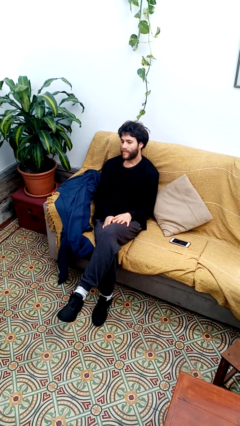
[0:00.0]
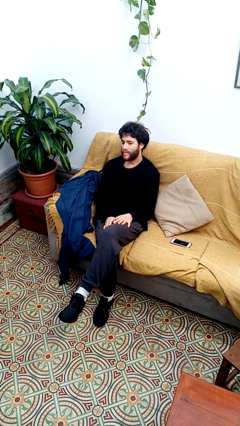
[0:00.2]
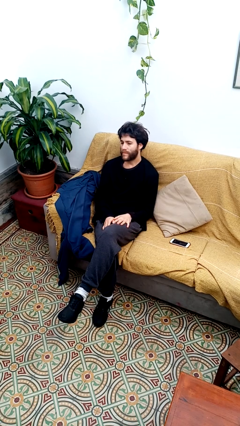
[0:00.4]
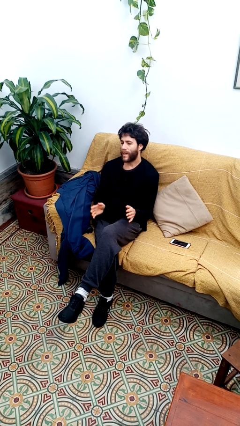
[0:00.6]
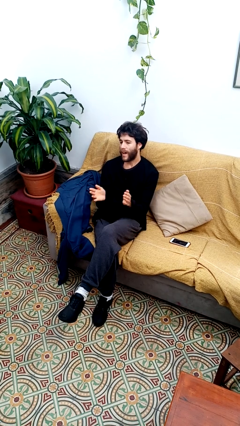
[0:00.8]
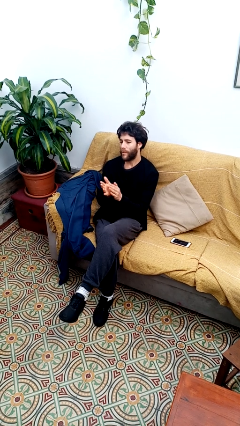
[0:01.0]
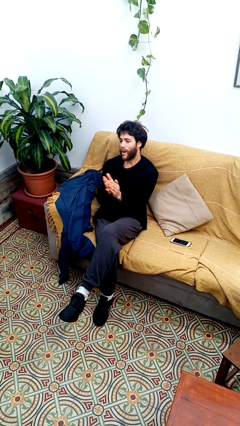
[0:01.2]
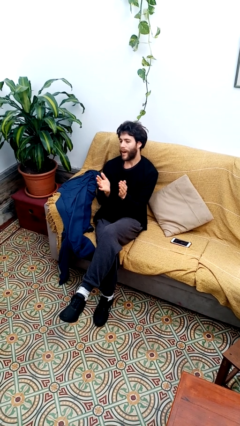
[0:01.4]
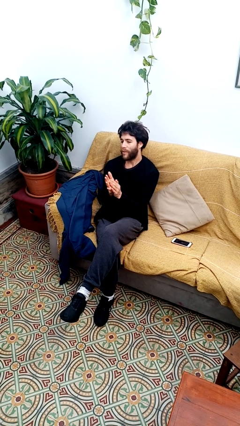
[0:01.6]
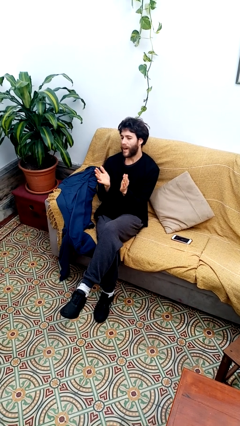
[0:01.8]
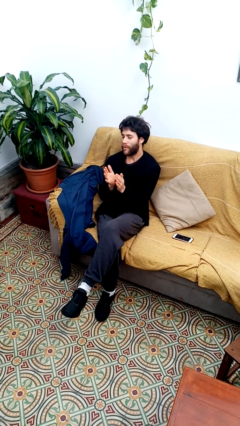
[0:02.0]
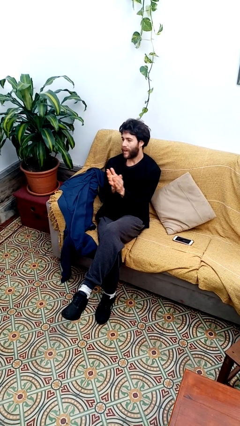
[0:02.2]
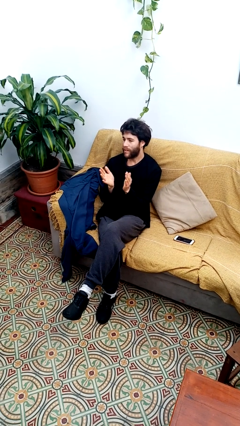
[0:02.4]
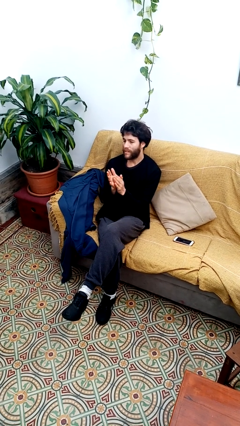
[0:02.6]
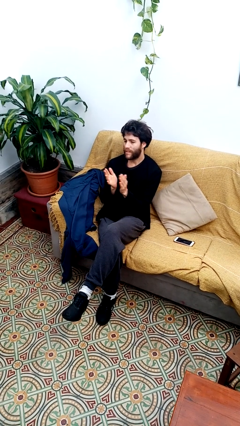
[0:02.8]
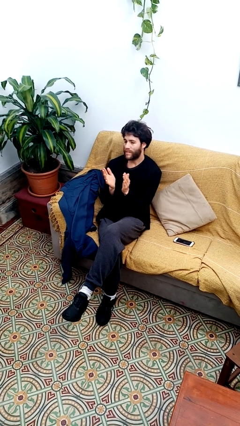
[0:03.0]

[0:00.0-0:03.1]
person claps hands

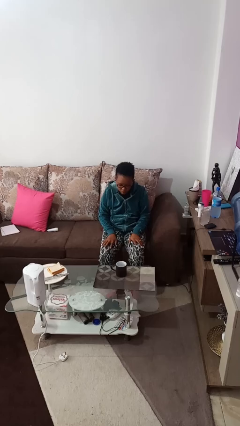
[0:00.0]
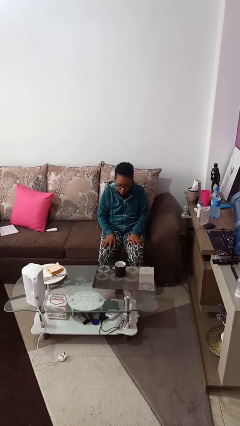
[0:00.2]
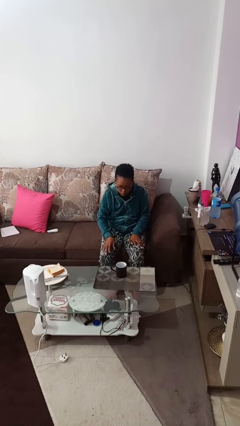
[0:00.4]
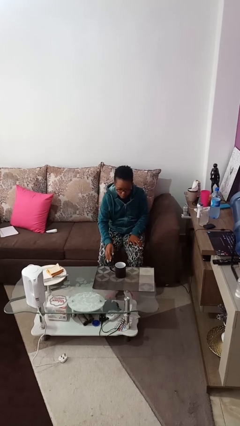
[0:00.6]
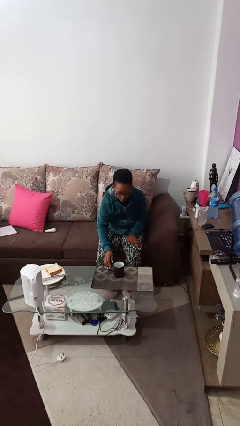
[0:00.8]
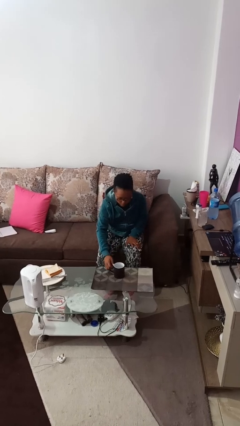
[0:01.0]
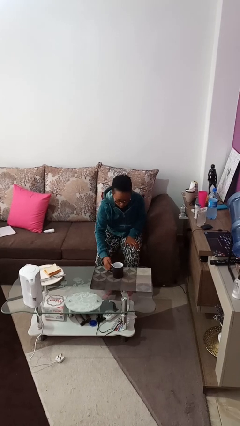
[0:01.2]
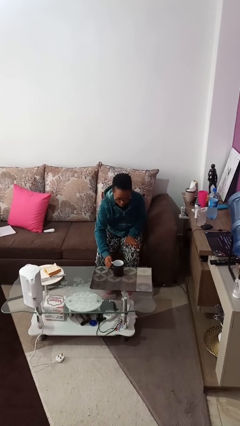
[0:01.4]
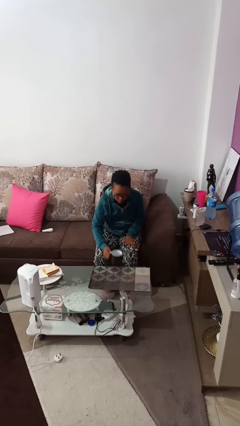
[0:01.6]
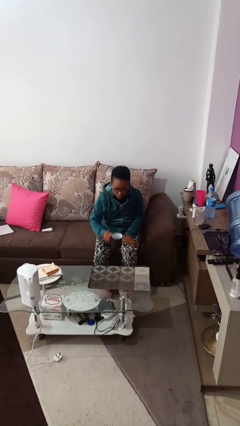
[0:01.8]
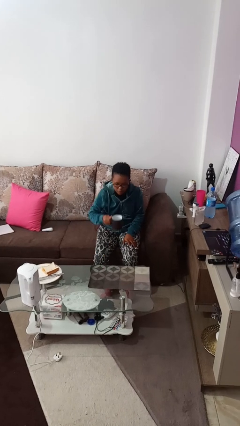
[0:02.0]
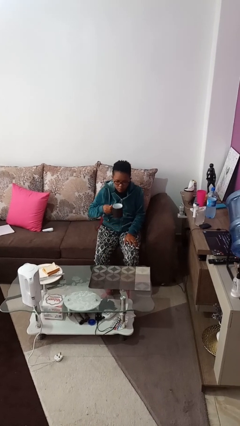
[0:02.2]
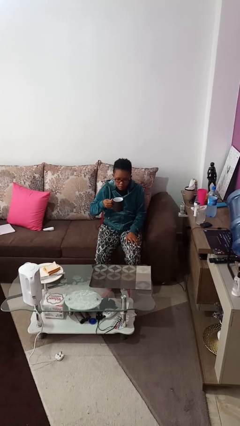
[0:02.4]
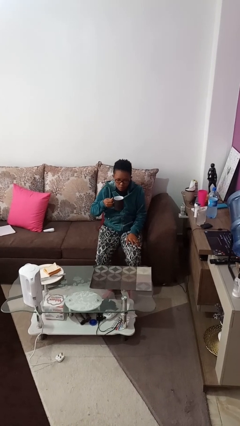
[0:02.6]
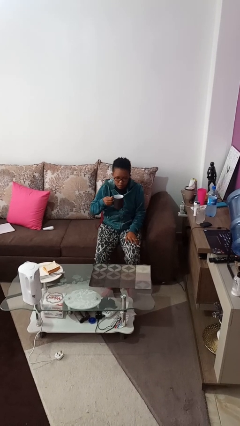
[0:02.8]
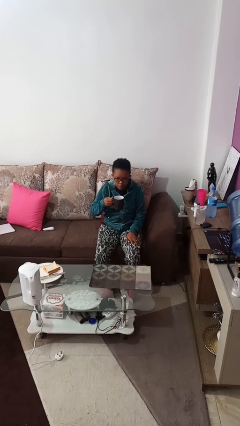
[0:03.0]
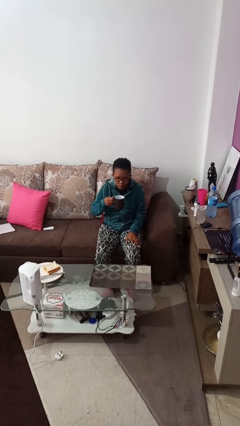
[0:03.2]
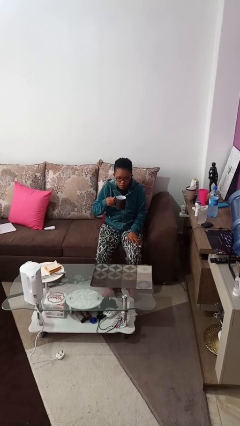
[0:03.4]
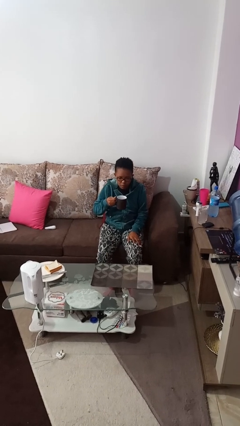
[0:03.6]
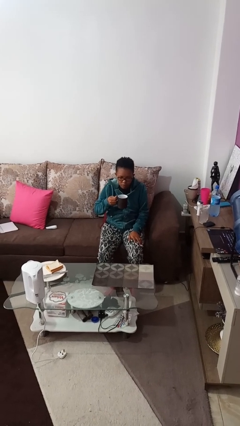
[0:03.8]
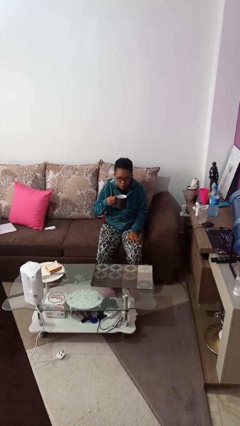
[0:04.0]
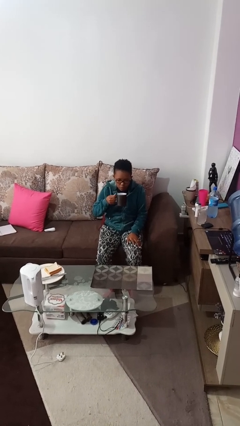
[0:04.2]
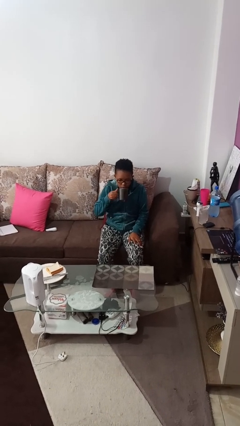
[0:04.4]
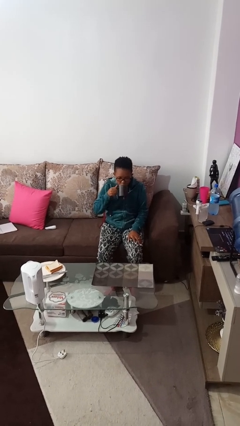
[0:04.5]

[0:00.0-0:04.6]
person picks up object from table

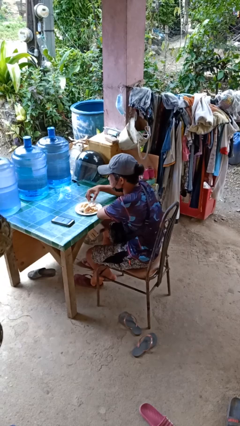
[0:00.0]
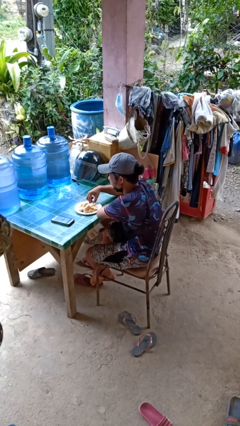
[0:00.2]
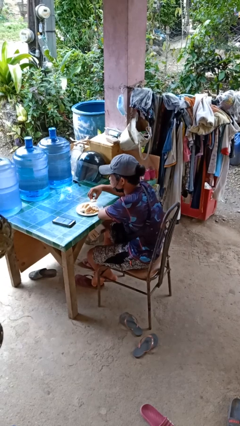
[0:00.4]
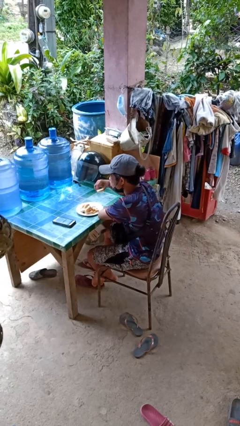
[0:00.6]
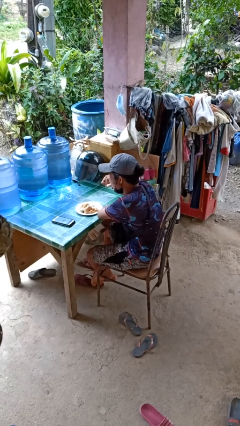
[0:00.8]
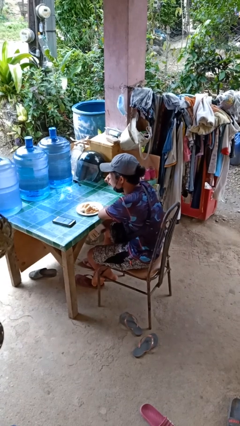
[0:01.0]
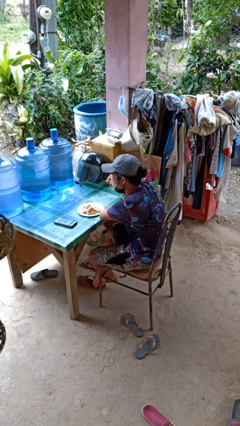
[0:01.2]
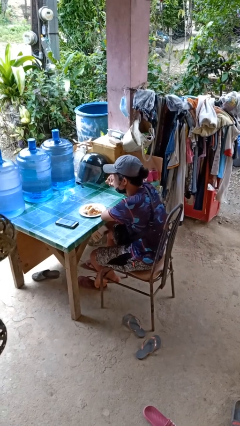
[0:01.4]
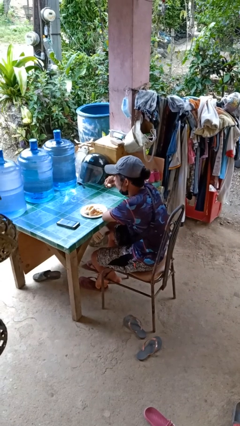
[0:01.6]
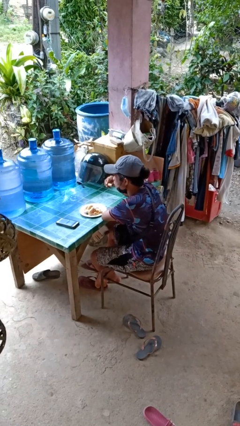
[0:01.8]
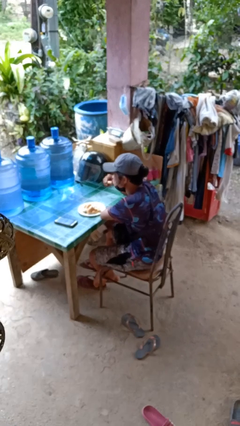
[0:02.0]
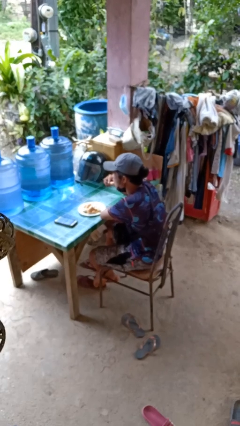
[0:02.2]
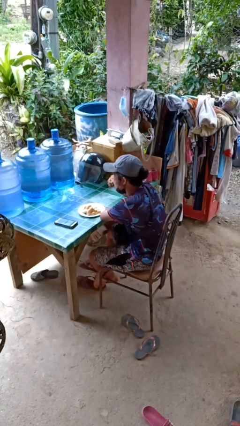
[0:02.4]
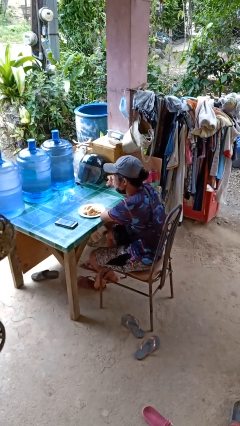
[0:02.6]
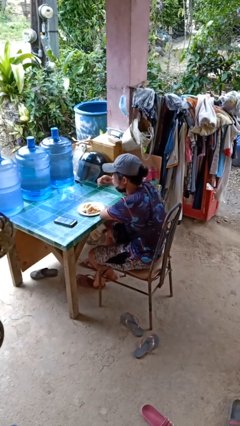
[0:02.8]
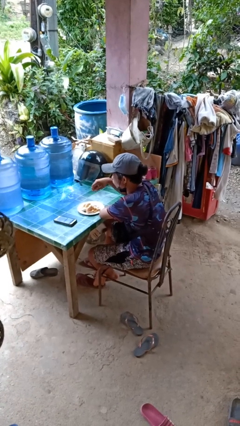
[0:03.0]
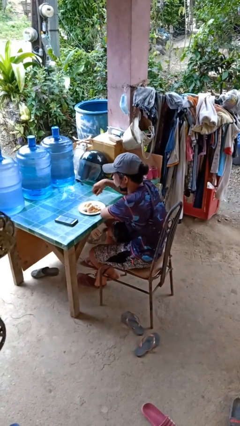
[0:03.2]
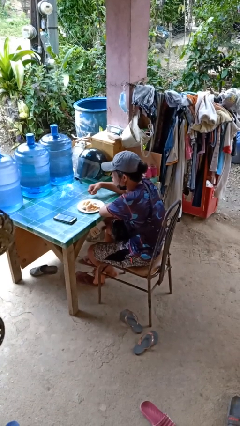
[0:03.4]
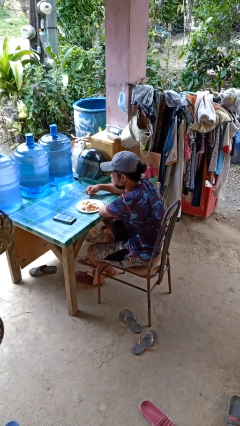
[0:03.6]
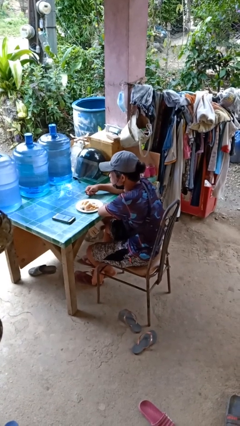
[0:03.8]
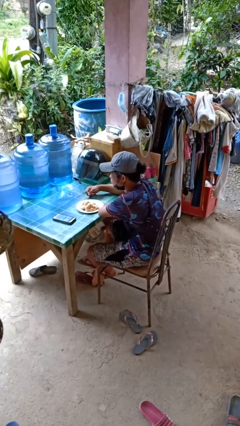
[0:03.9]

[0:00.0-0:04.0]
person eats with hands

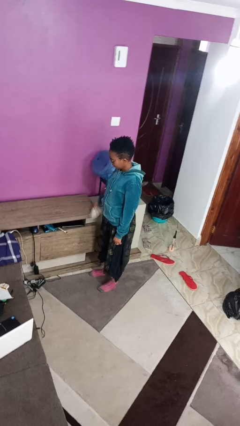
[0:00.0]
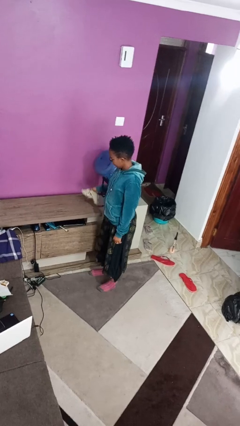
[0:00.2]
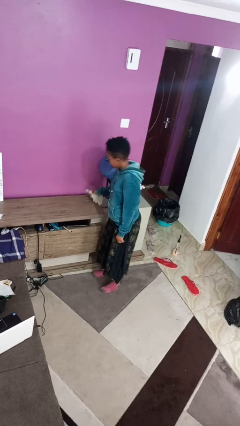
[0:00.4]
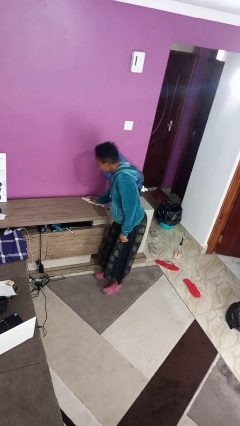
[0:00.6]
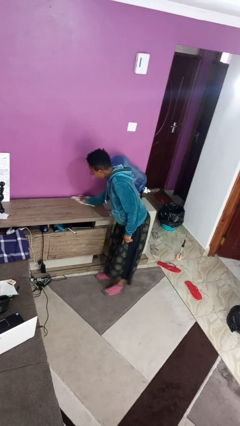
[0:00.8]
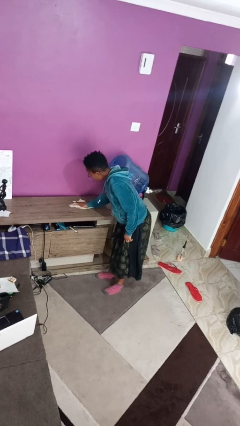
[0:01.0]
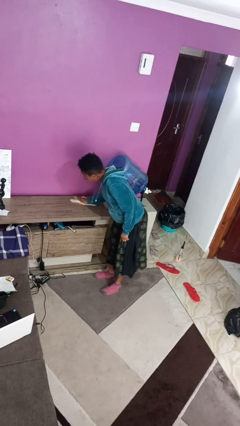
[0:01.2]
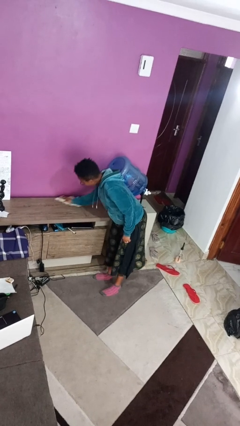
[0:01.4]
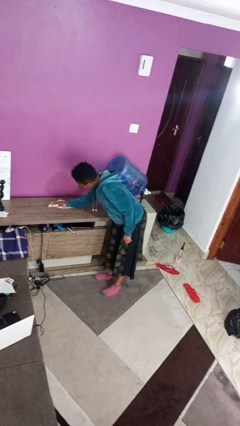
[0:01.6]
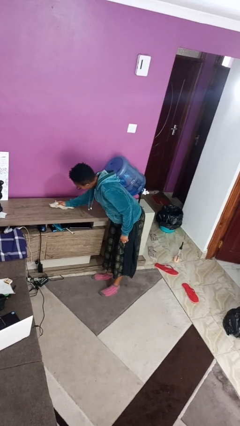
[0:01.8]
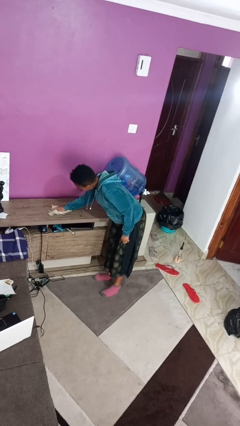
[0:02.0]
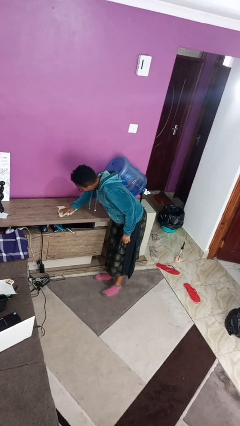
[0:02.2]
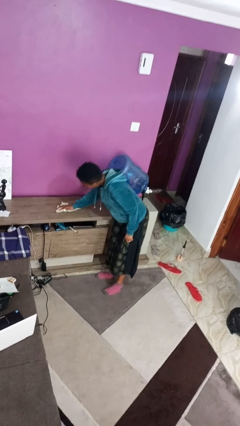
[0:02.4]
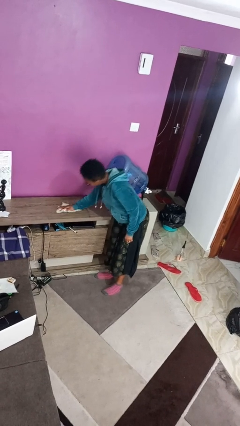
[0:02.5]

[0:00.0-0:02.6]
person cleans table with rag

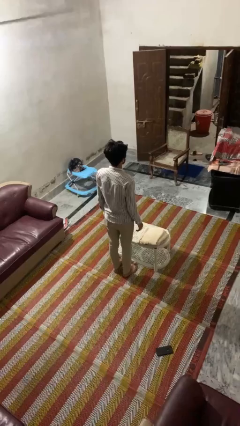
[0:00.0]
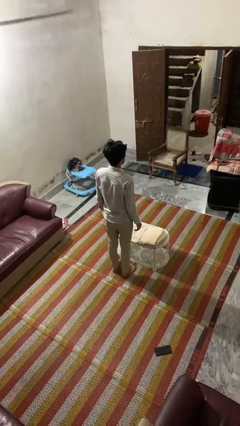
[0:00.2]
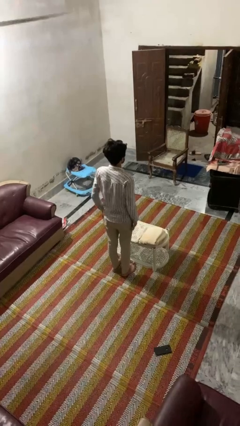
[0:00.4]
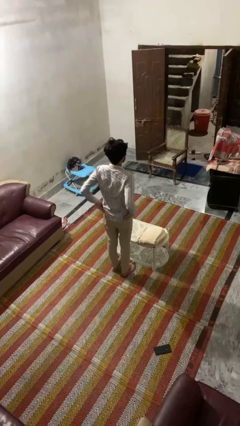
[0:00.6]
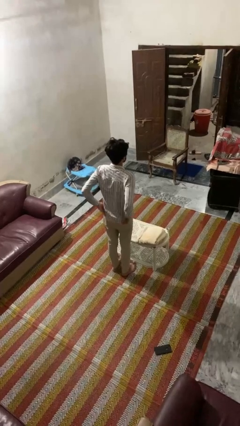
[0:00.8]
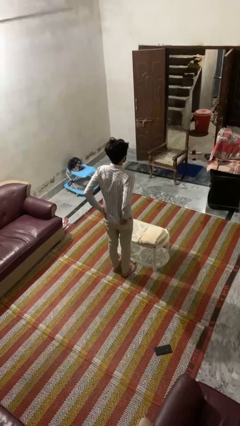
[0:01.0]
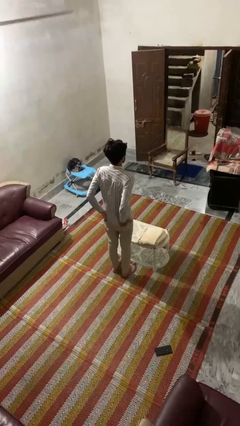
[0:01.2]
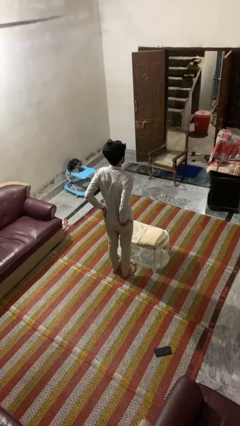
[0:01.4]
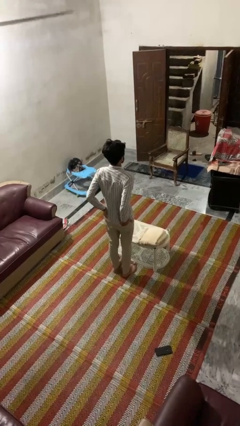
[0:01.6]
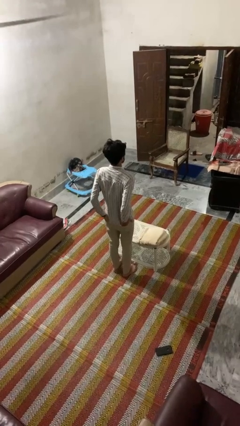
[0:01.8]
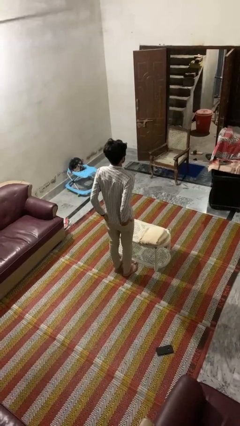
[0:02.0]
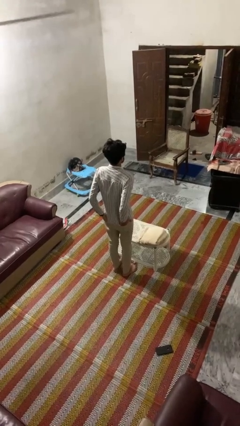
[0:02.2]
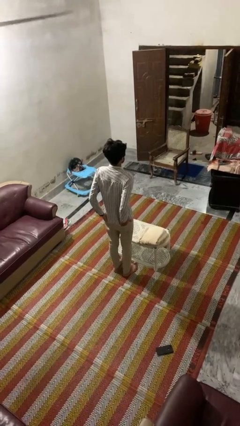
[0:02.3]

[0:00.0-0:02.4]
person puts hands in back pockets

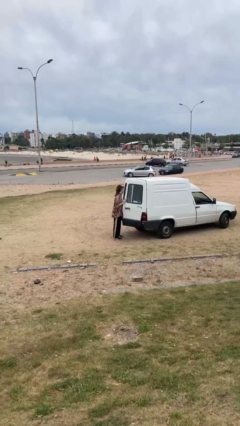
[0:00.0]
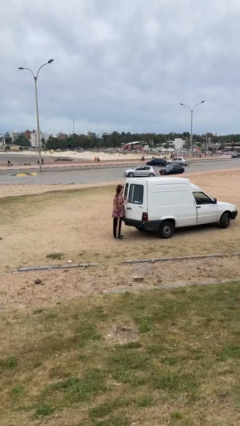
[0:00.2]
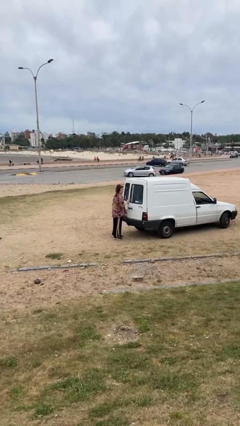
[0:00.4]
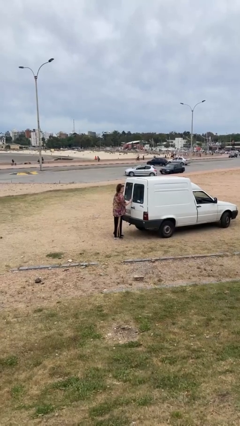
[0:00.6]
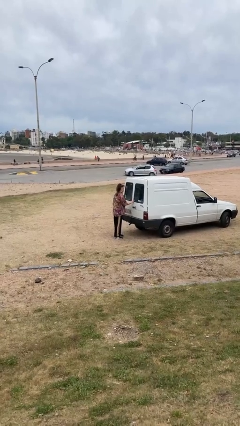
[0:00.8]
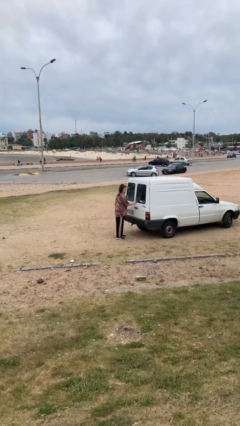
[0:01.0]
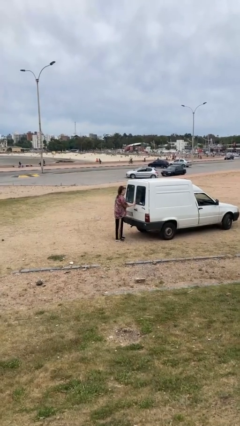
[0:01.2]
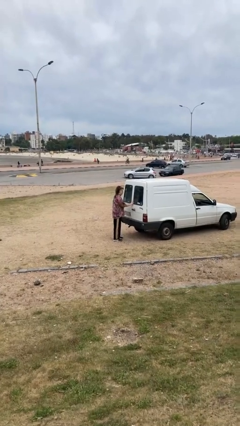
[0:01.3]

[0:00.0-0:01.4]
person closes car door
